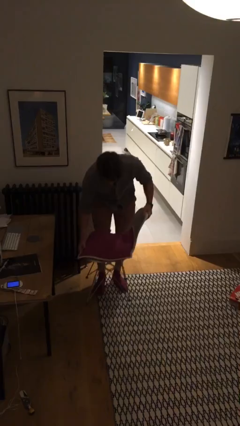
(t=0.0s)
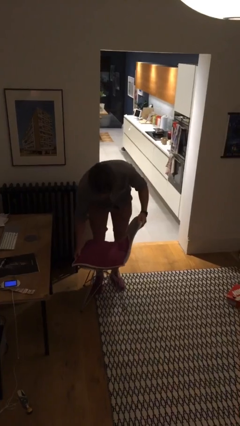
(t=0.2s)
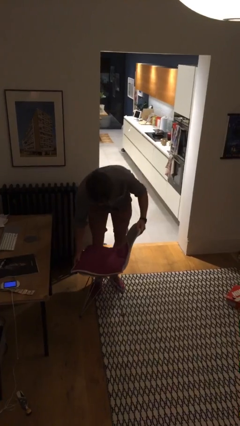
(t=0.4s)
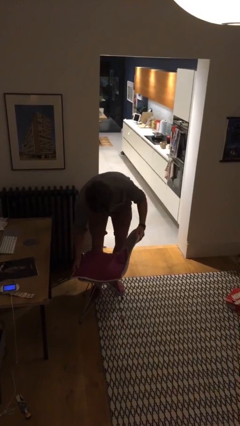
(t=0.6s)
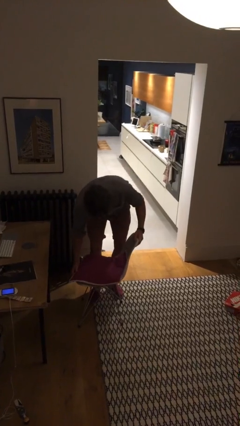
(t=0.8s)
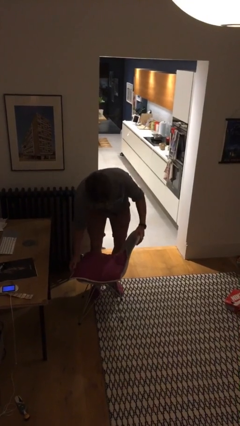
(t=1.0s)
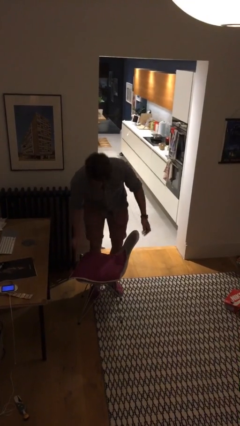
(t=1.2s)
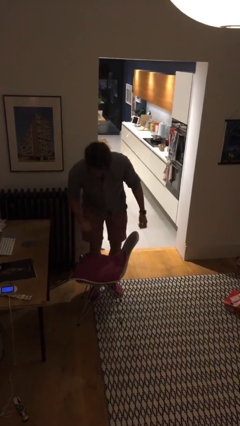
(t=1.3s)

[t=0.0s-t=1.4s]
person puts down object on floor

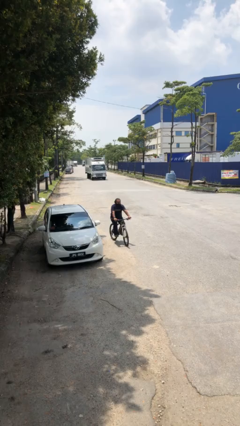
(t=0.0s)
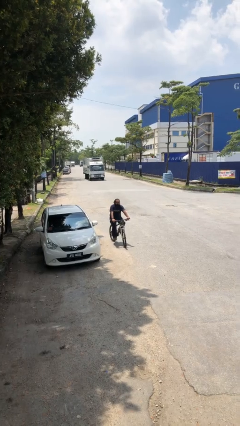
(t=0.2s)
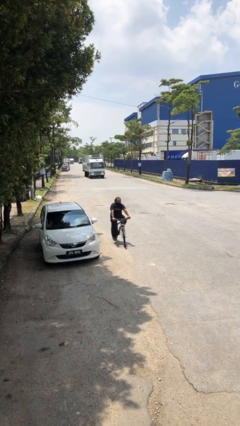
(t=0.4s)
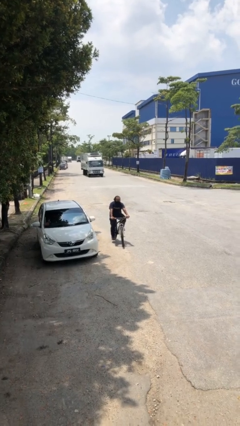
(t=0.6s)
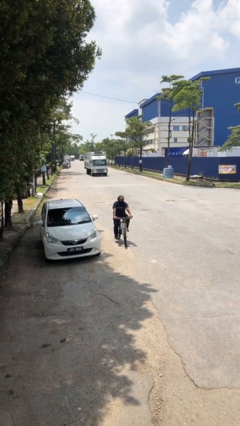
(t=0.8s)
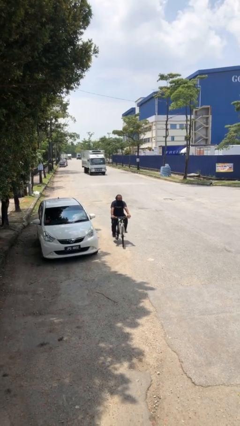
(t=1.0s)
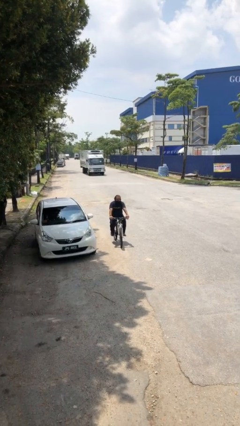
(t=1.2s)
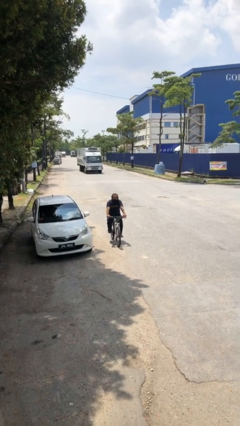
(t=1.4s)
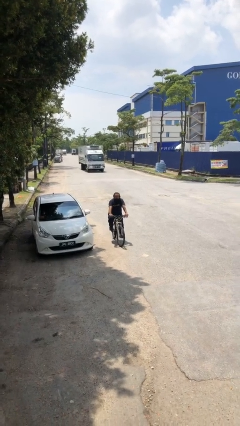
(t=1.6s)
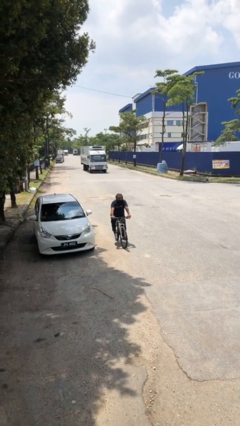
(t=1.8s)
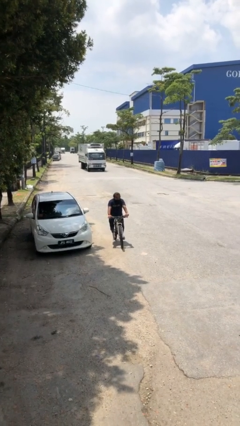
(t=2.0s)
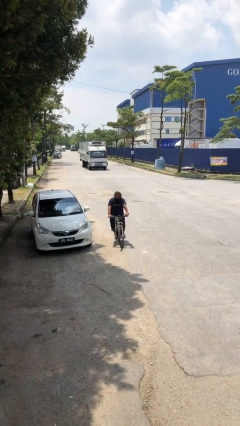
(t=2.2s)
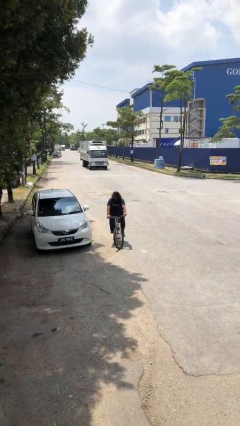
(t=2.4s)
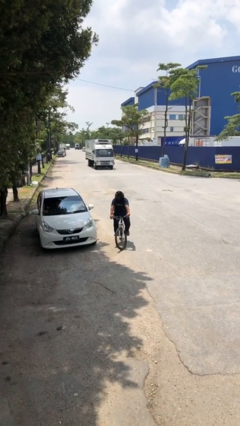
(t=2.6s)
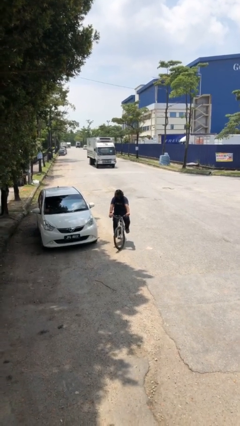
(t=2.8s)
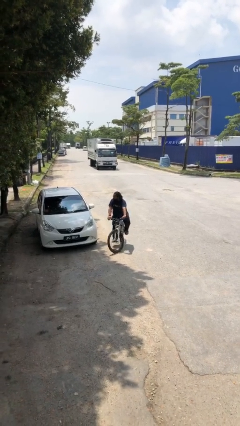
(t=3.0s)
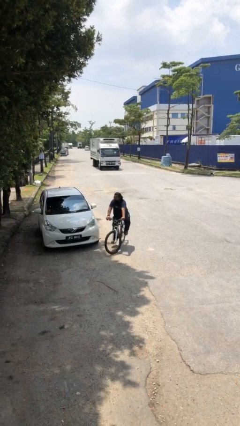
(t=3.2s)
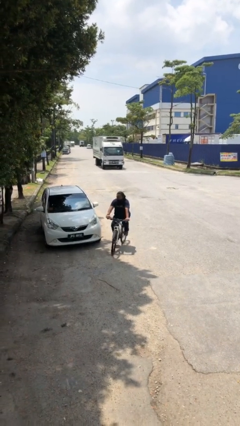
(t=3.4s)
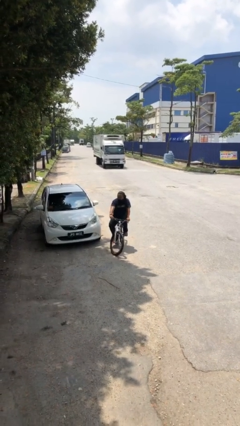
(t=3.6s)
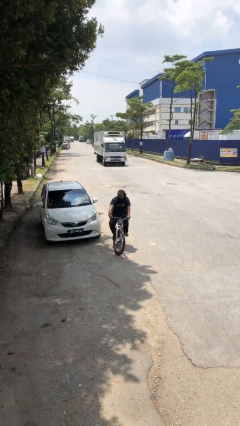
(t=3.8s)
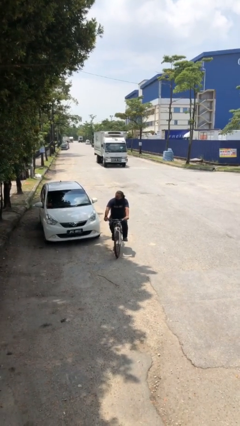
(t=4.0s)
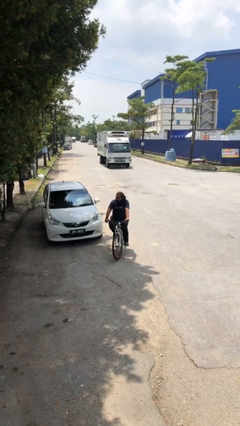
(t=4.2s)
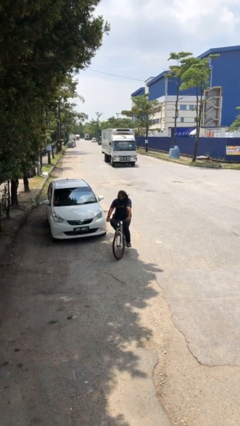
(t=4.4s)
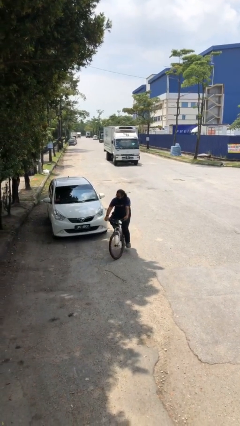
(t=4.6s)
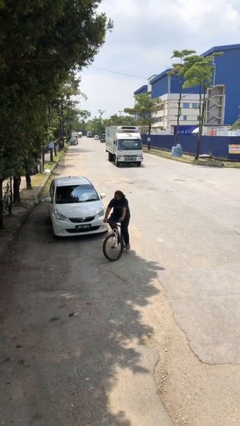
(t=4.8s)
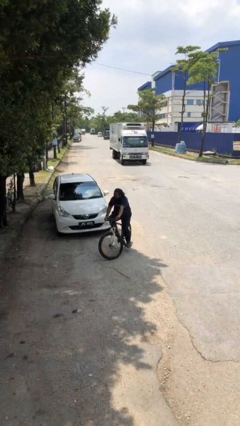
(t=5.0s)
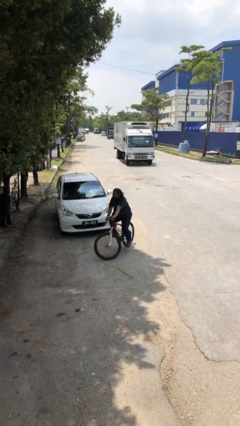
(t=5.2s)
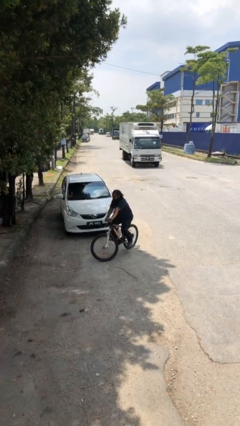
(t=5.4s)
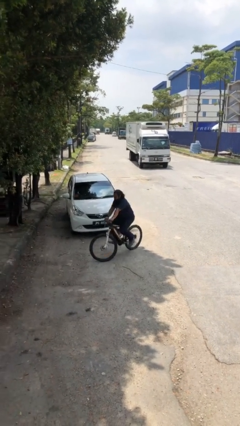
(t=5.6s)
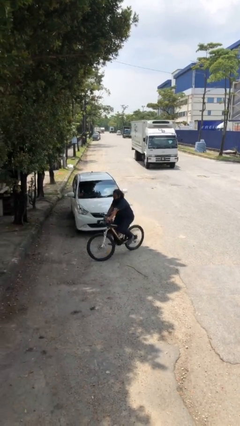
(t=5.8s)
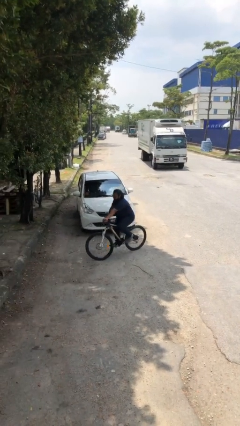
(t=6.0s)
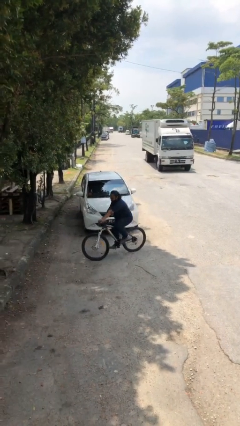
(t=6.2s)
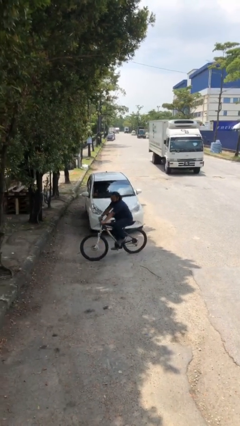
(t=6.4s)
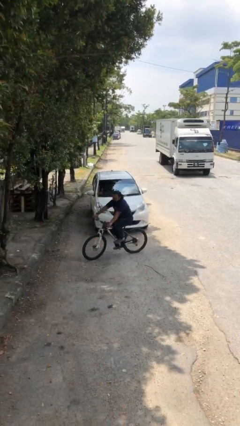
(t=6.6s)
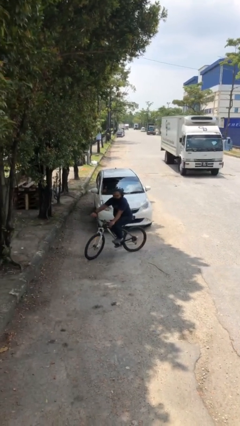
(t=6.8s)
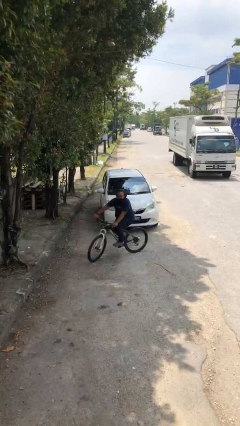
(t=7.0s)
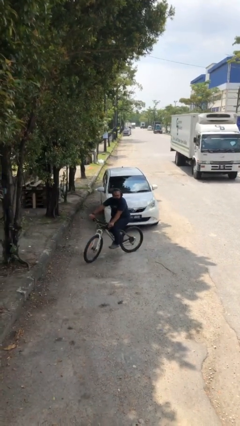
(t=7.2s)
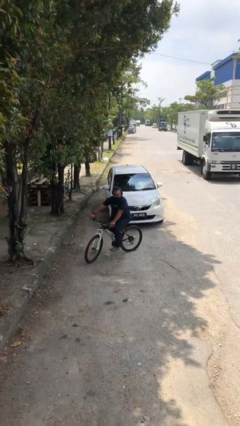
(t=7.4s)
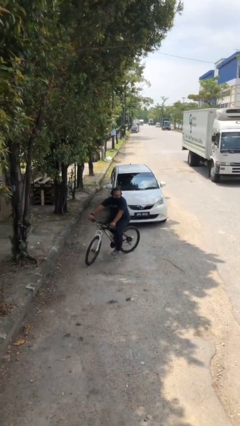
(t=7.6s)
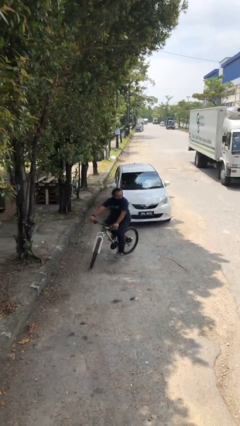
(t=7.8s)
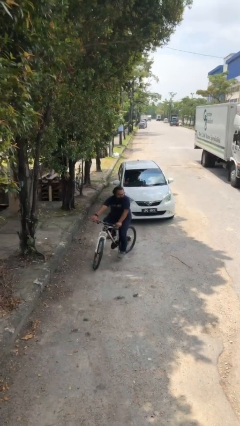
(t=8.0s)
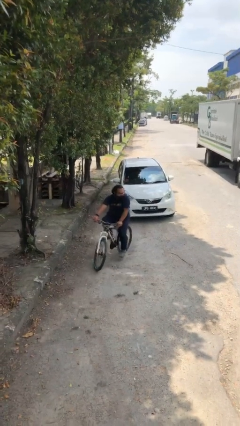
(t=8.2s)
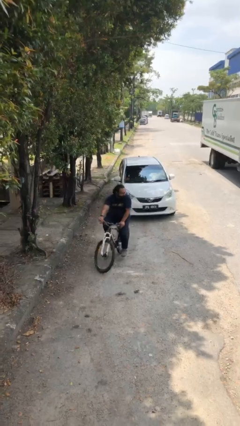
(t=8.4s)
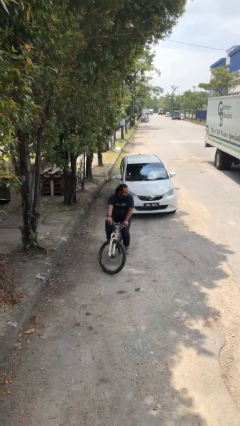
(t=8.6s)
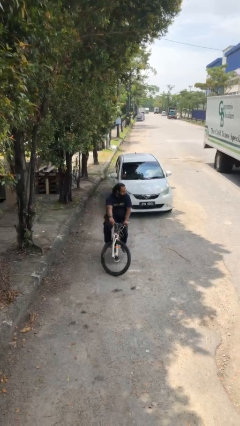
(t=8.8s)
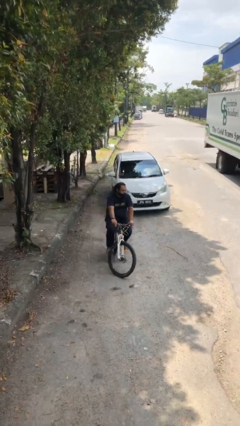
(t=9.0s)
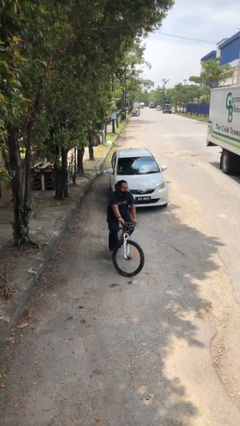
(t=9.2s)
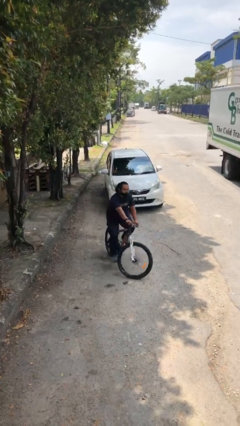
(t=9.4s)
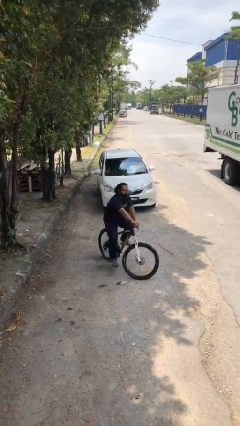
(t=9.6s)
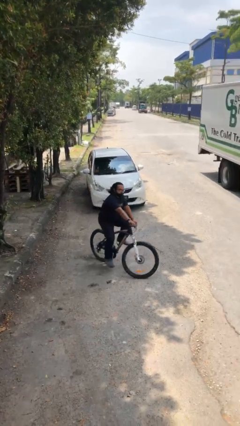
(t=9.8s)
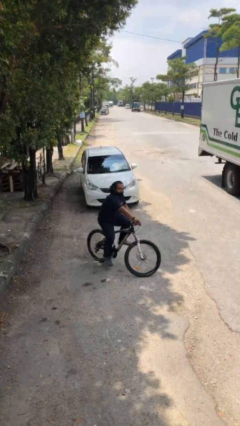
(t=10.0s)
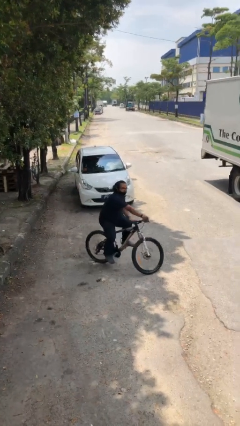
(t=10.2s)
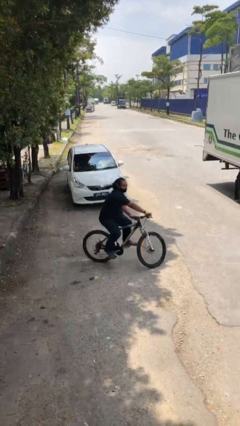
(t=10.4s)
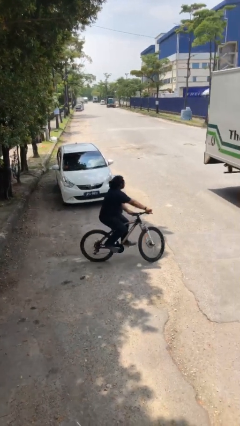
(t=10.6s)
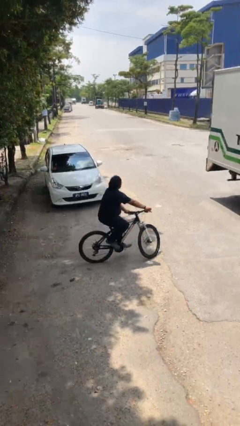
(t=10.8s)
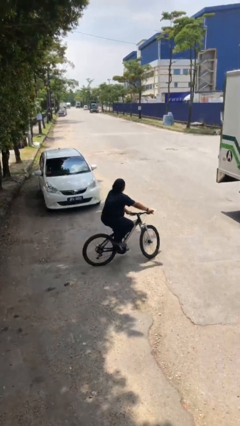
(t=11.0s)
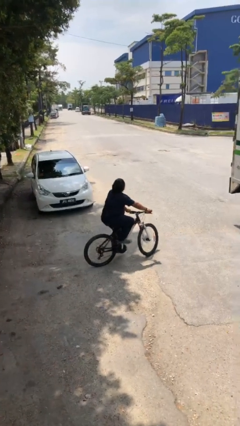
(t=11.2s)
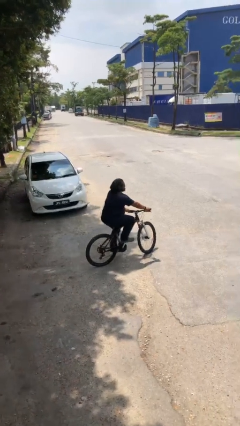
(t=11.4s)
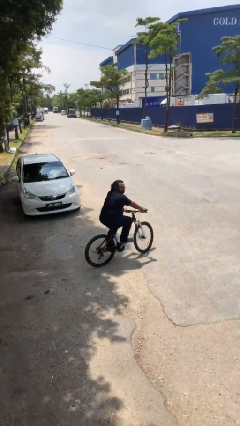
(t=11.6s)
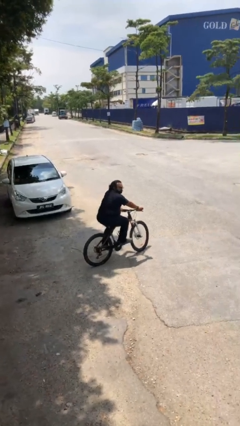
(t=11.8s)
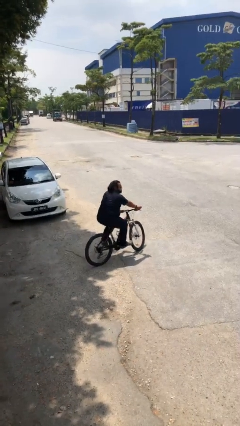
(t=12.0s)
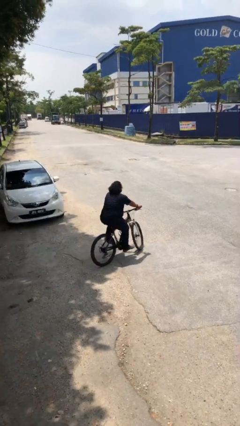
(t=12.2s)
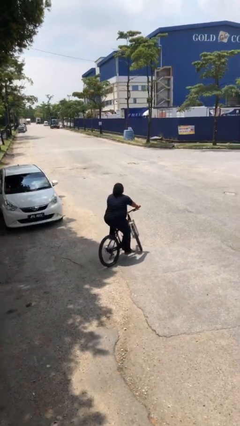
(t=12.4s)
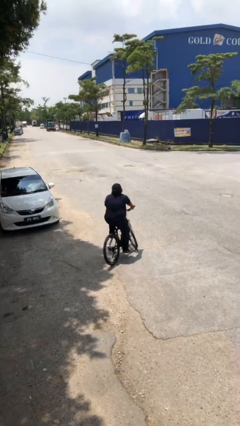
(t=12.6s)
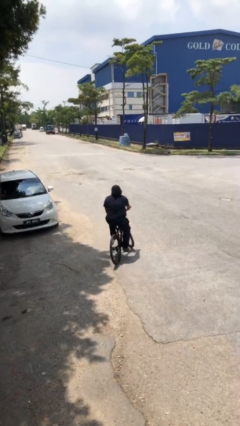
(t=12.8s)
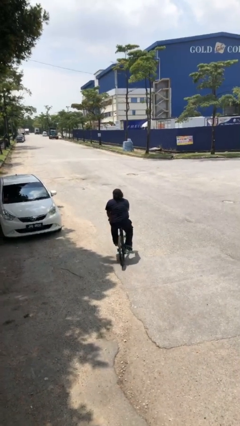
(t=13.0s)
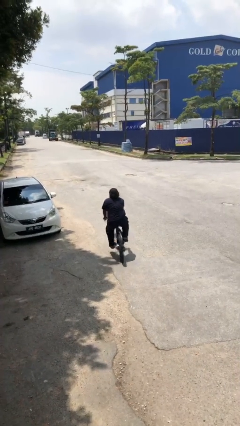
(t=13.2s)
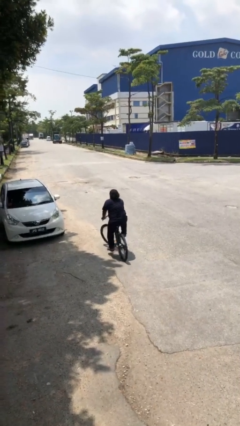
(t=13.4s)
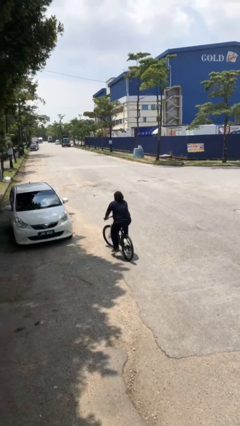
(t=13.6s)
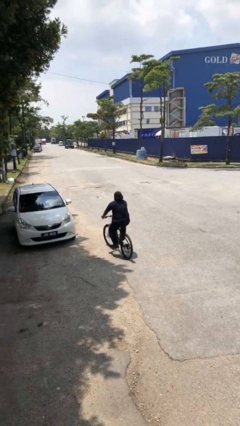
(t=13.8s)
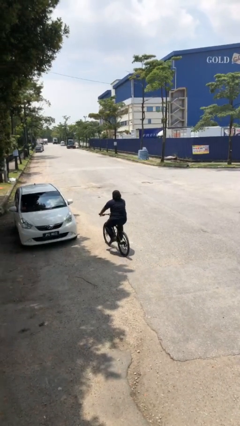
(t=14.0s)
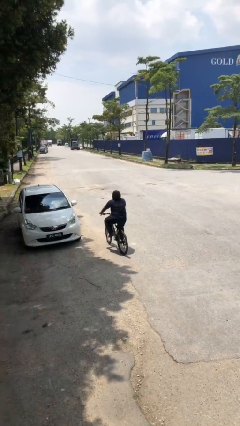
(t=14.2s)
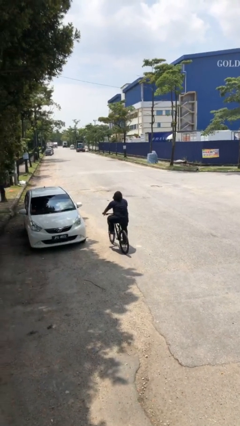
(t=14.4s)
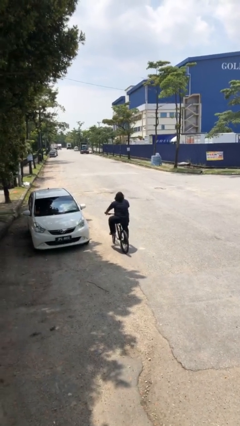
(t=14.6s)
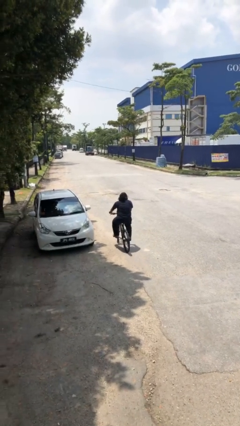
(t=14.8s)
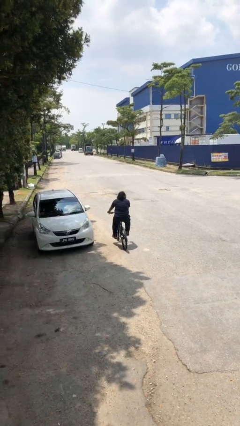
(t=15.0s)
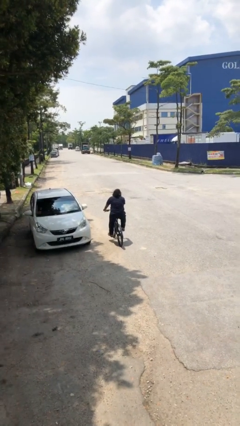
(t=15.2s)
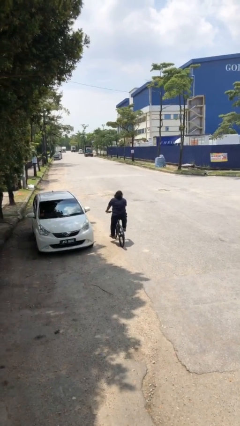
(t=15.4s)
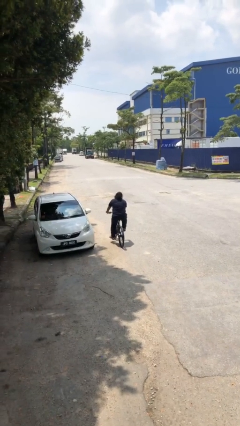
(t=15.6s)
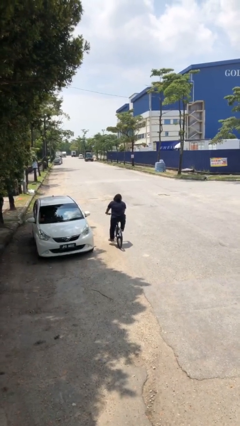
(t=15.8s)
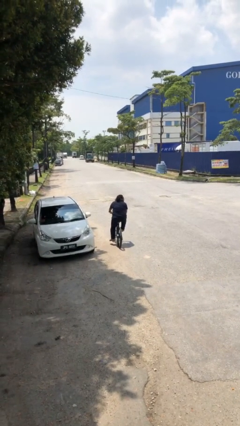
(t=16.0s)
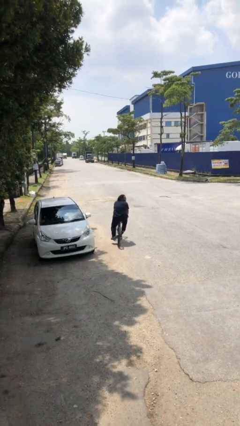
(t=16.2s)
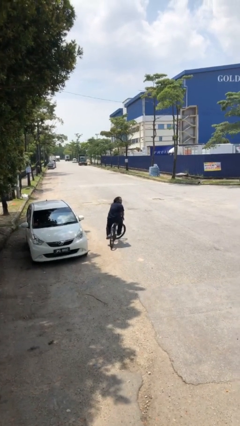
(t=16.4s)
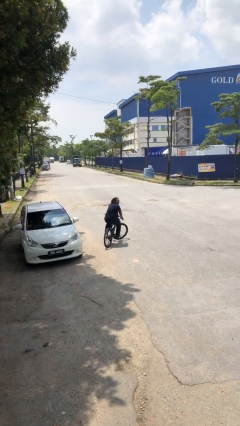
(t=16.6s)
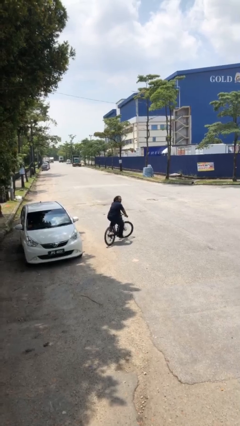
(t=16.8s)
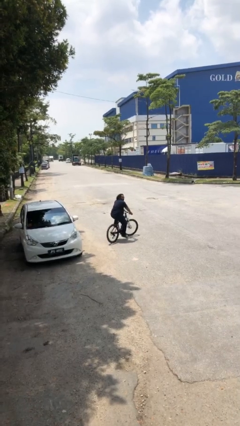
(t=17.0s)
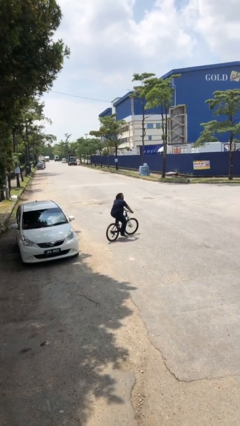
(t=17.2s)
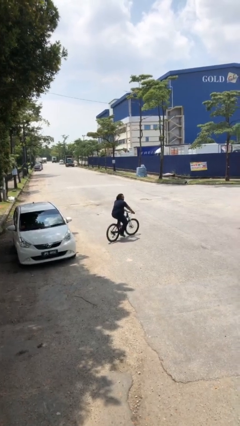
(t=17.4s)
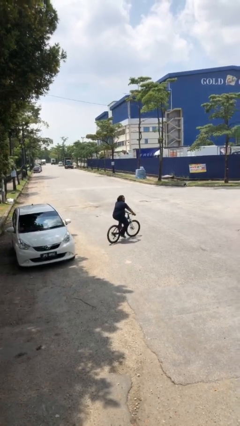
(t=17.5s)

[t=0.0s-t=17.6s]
person rides bicycle
